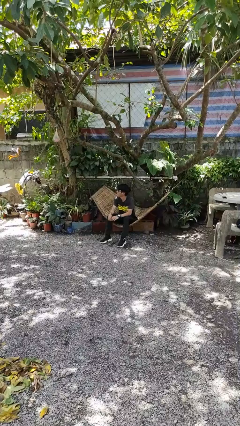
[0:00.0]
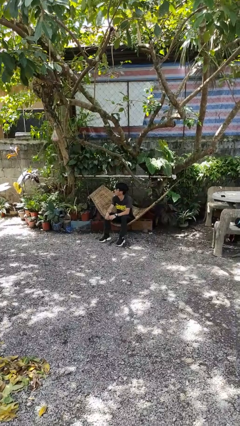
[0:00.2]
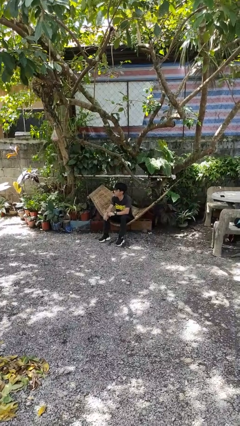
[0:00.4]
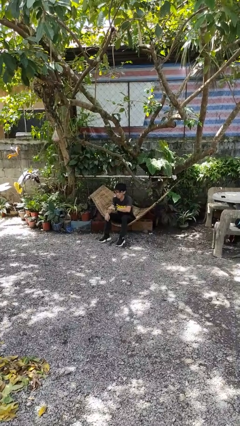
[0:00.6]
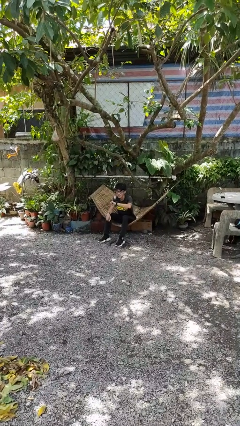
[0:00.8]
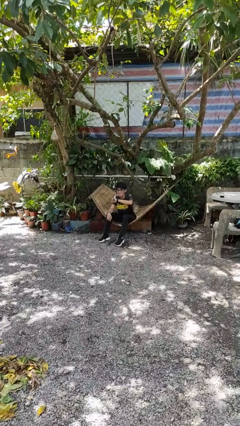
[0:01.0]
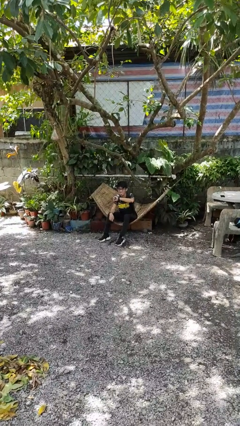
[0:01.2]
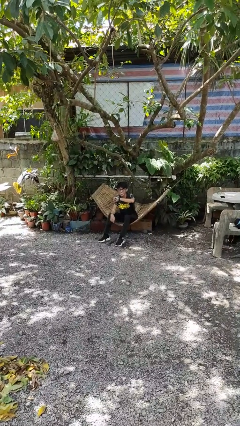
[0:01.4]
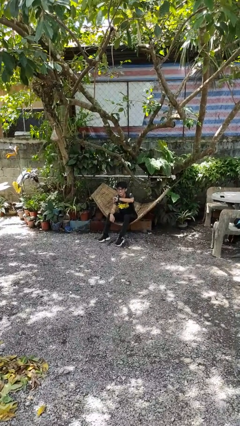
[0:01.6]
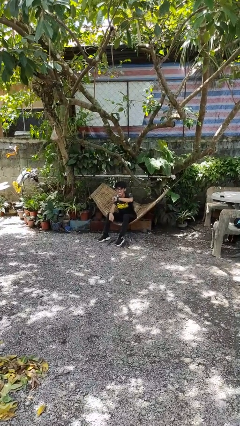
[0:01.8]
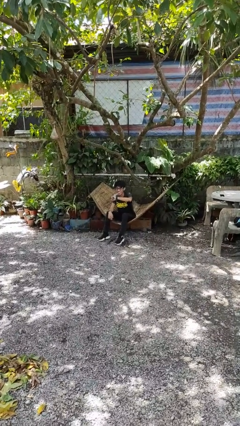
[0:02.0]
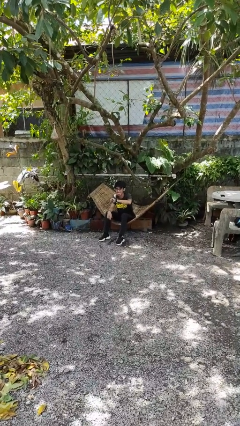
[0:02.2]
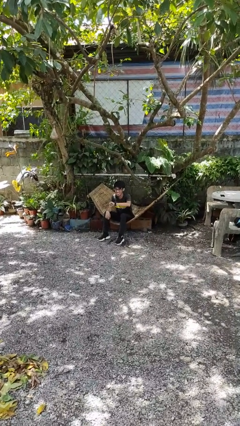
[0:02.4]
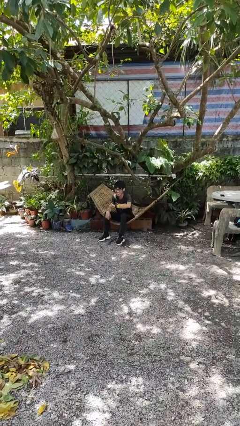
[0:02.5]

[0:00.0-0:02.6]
person looks at wristwatch

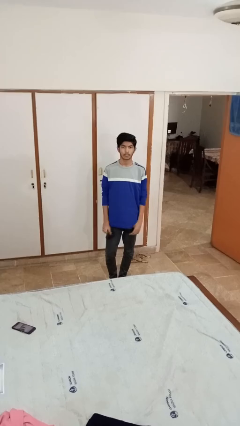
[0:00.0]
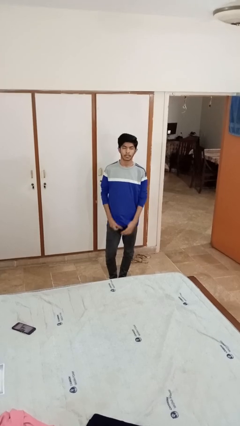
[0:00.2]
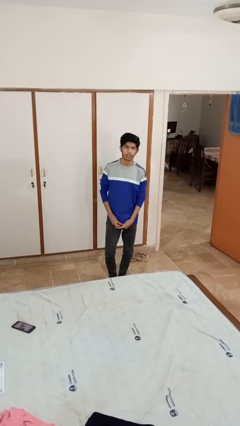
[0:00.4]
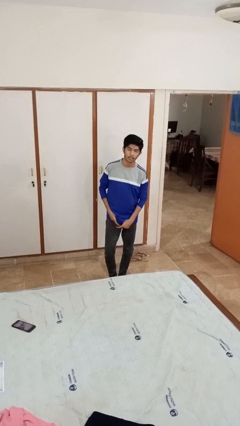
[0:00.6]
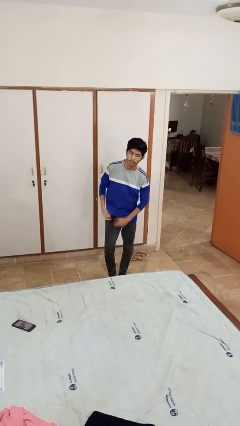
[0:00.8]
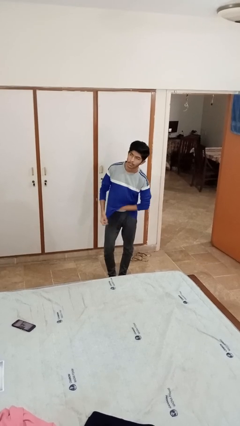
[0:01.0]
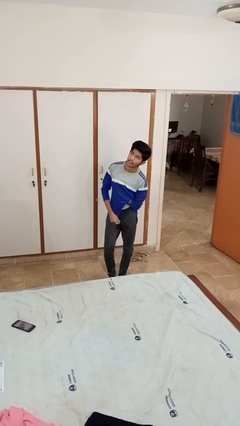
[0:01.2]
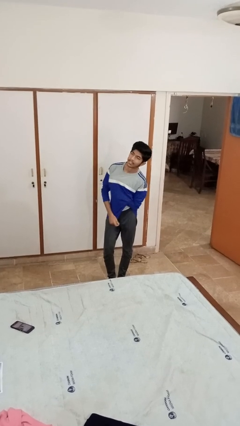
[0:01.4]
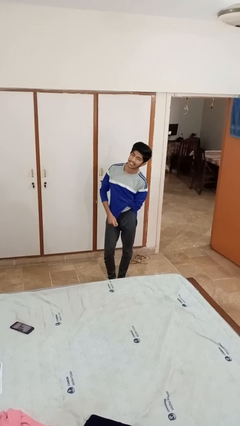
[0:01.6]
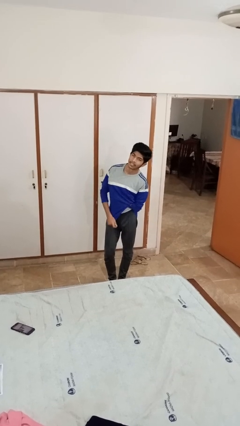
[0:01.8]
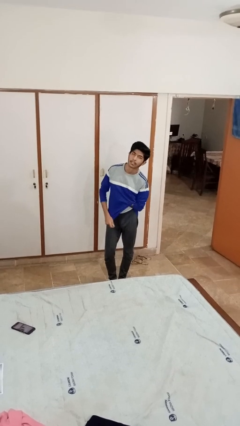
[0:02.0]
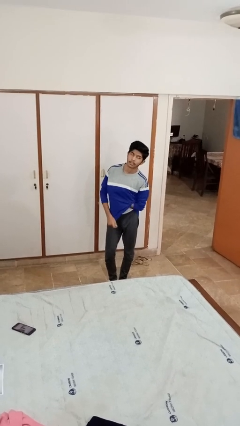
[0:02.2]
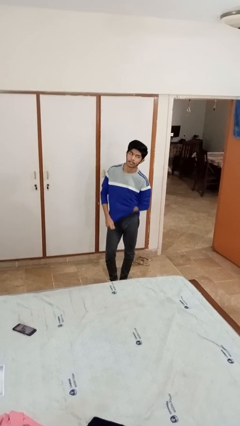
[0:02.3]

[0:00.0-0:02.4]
person applies deodorant

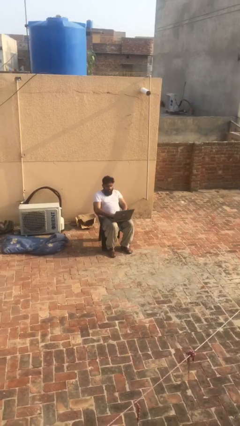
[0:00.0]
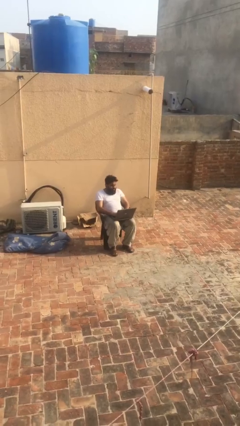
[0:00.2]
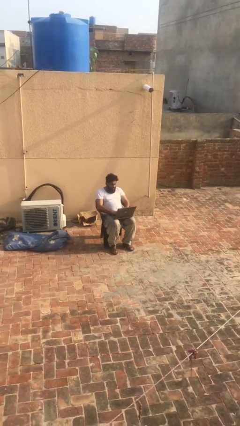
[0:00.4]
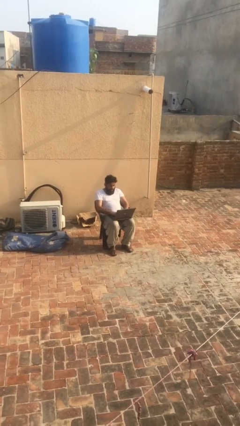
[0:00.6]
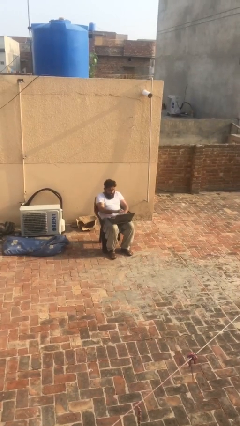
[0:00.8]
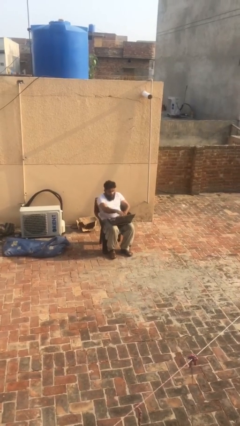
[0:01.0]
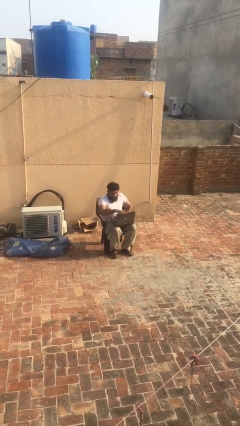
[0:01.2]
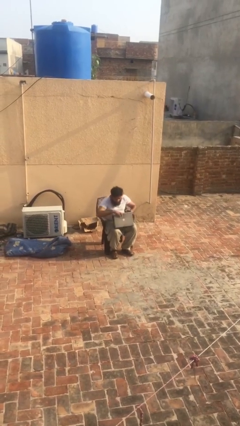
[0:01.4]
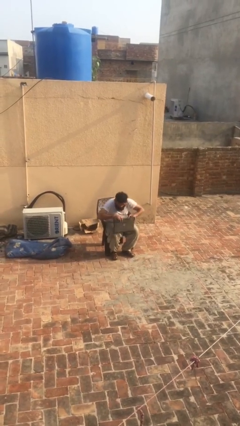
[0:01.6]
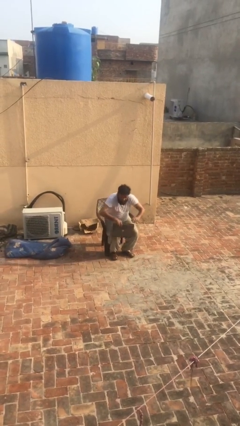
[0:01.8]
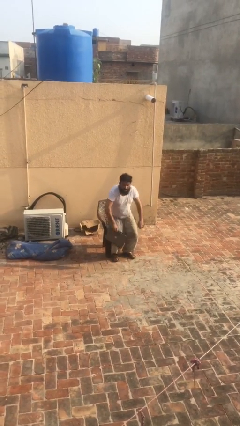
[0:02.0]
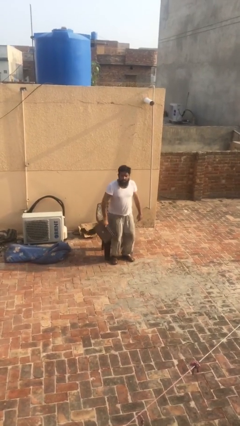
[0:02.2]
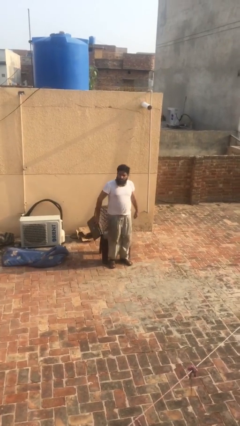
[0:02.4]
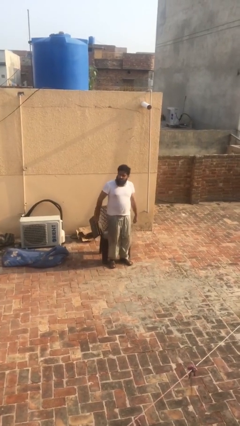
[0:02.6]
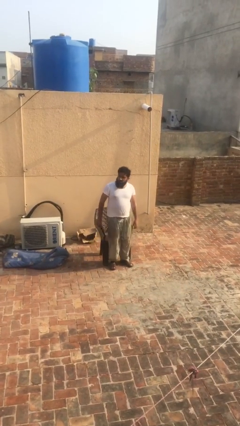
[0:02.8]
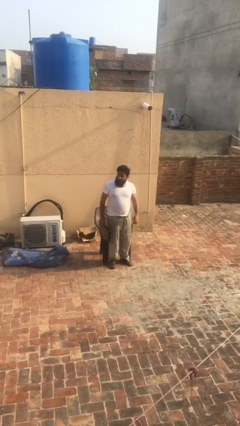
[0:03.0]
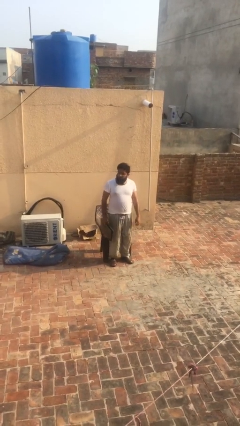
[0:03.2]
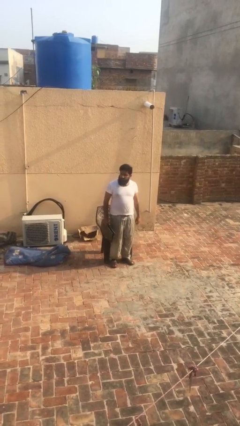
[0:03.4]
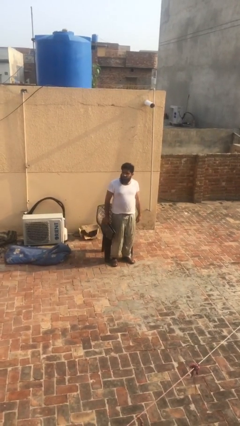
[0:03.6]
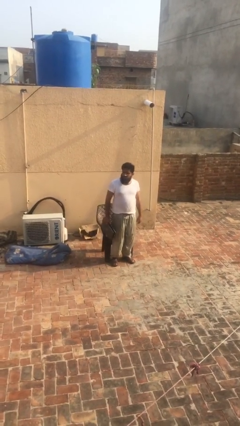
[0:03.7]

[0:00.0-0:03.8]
person stands up

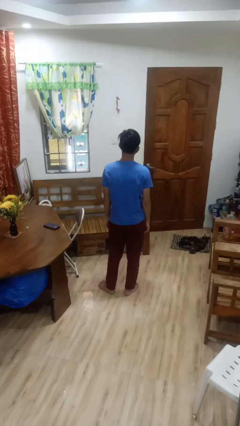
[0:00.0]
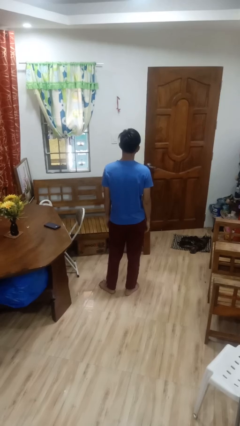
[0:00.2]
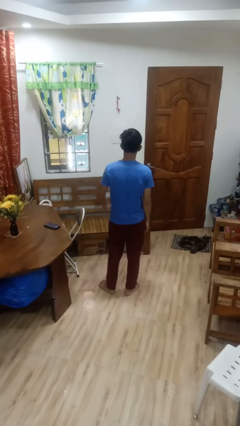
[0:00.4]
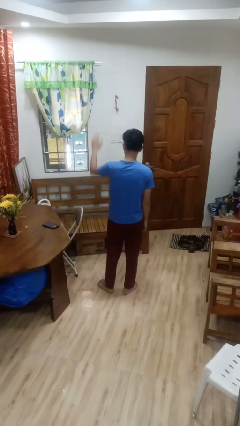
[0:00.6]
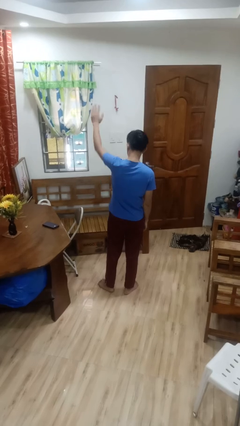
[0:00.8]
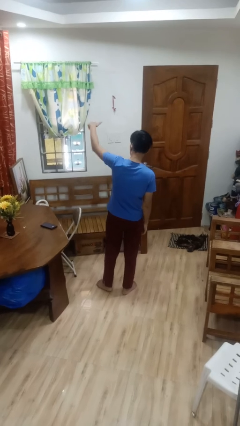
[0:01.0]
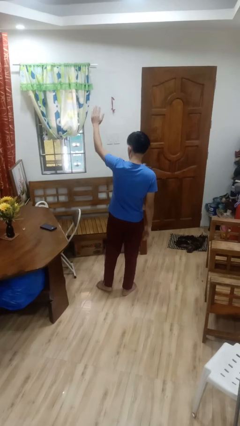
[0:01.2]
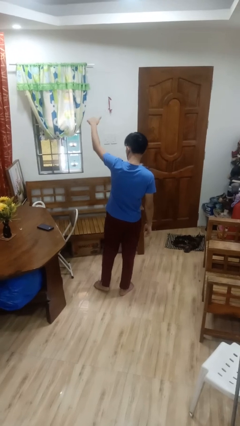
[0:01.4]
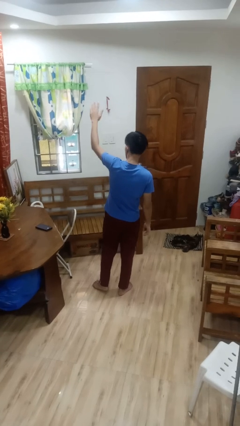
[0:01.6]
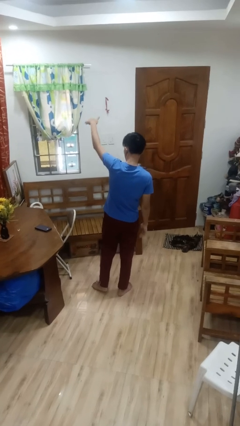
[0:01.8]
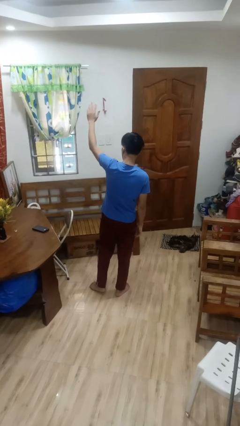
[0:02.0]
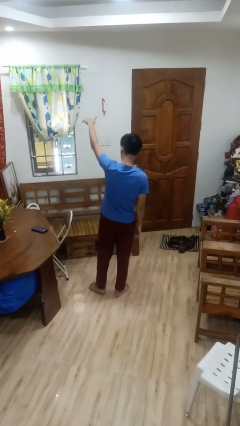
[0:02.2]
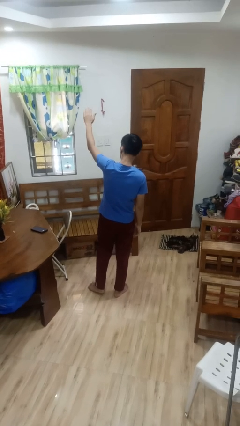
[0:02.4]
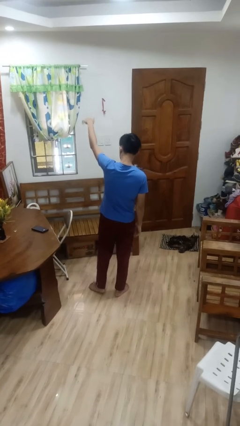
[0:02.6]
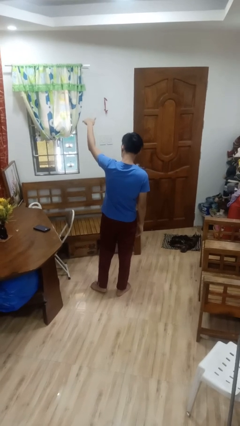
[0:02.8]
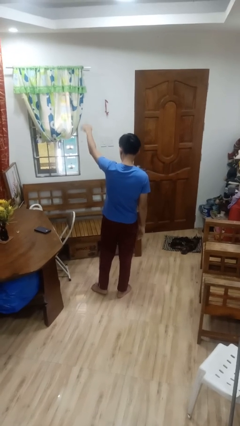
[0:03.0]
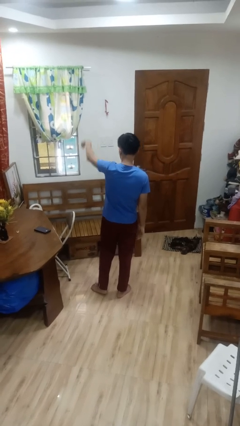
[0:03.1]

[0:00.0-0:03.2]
person gestures come here

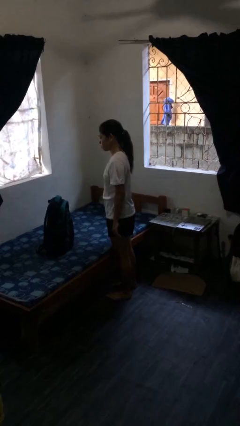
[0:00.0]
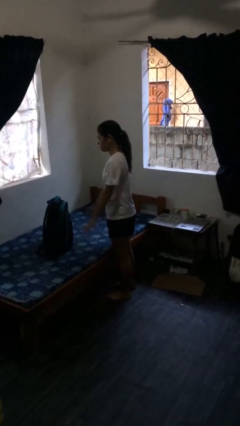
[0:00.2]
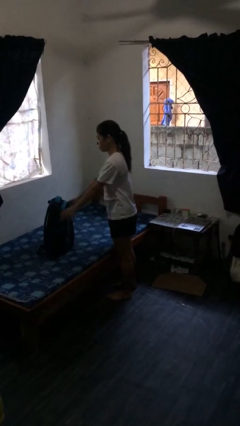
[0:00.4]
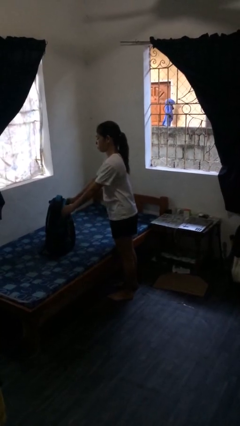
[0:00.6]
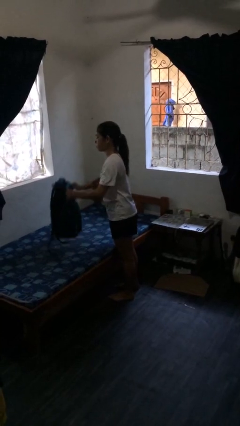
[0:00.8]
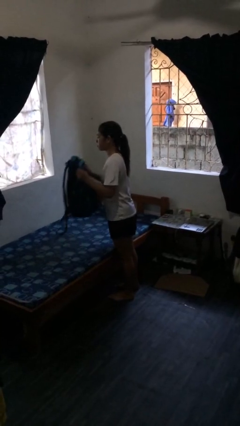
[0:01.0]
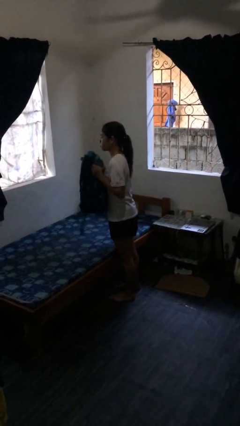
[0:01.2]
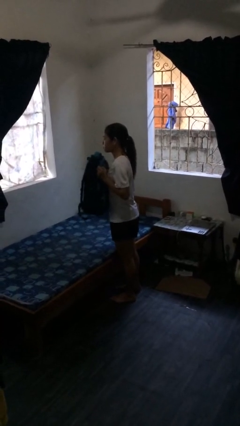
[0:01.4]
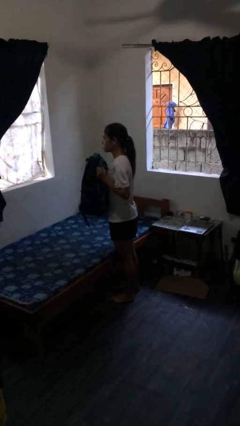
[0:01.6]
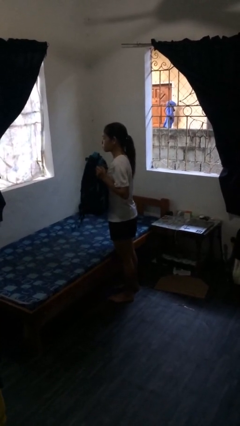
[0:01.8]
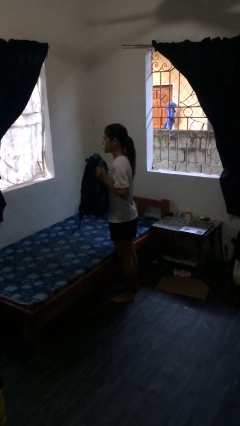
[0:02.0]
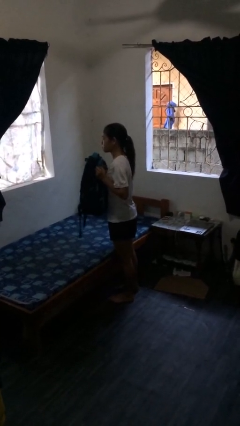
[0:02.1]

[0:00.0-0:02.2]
person picks up object from bed

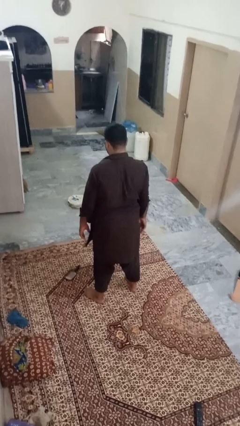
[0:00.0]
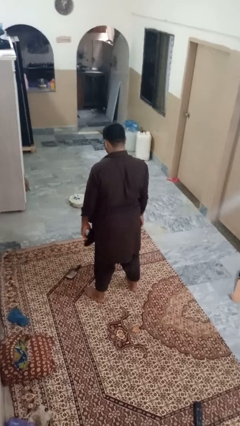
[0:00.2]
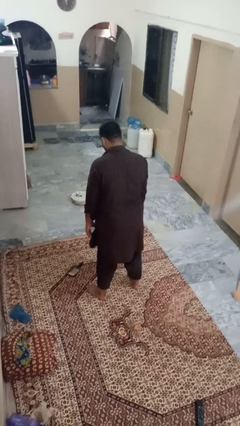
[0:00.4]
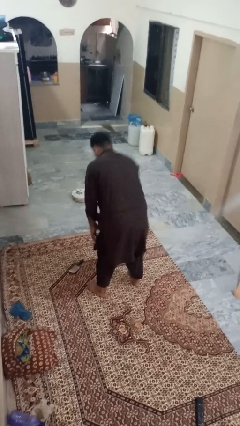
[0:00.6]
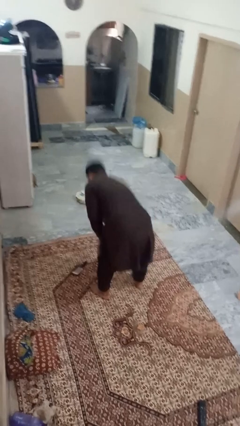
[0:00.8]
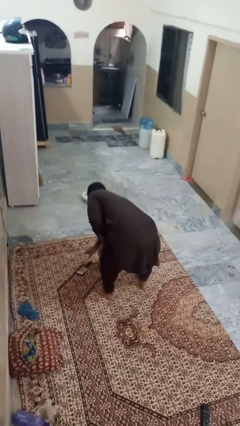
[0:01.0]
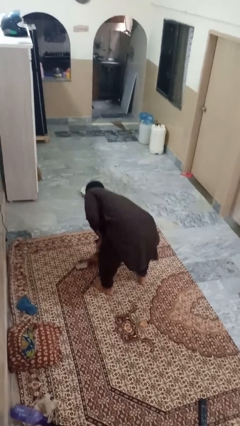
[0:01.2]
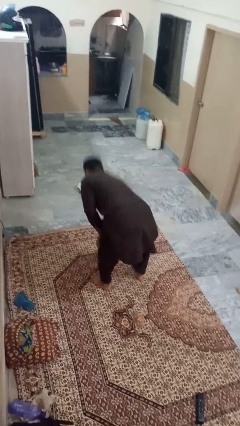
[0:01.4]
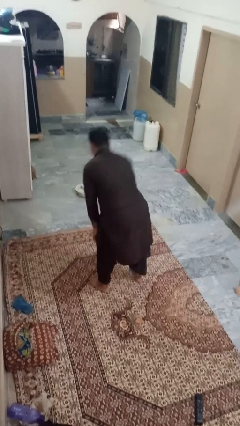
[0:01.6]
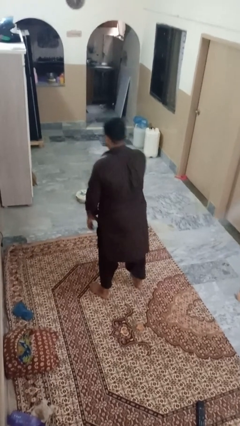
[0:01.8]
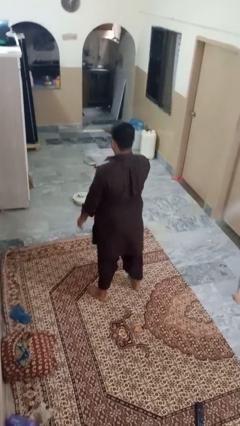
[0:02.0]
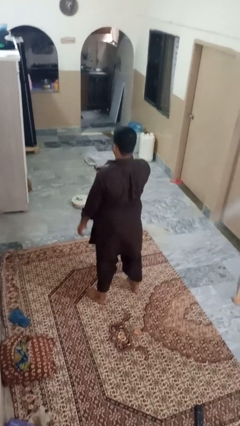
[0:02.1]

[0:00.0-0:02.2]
person picks up object from floor

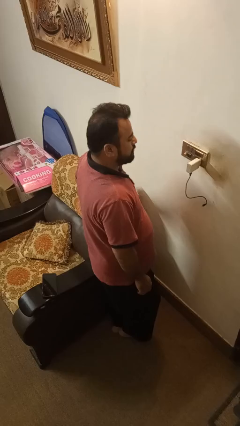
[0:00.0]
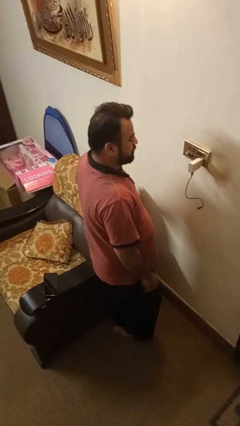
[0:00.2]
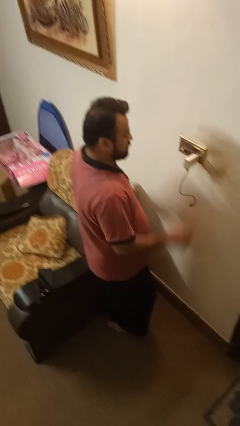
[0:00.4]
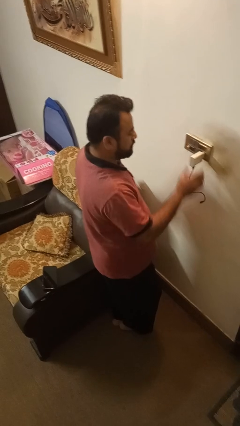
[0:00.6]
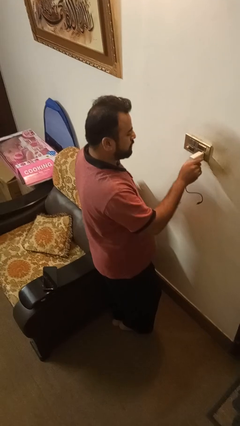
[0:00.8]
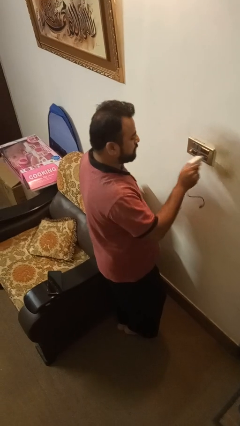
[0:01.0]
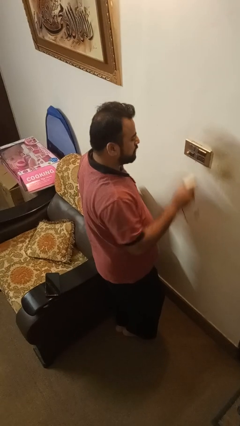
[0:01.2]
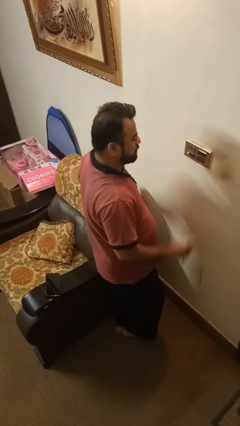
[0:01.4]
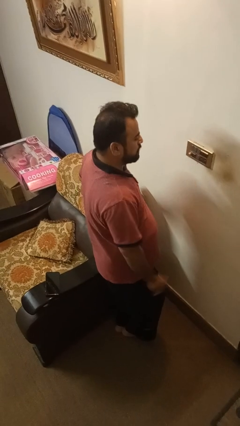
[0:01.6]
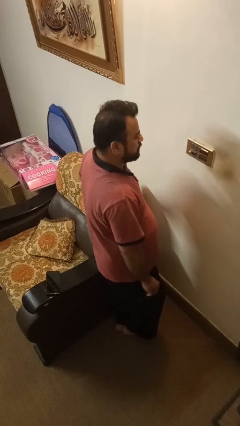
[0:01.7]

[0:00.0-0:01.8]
person unplugs from electrical socket
